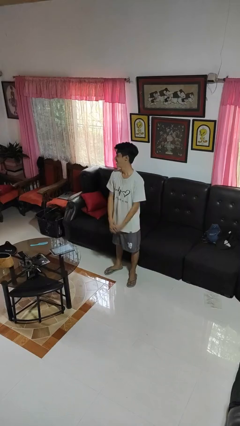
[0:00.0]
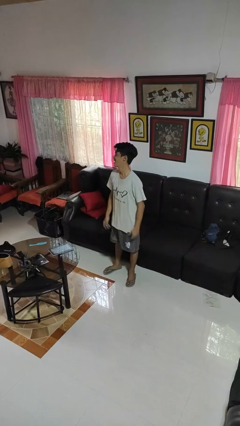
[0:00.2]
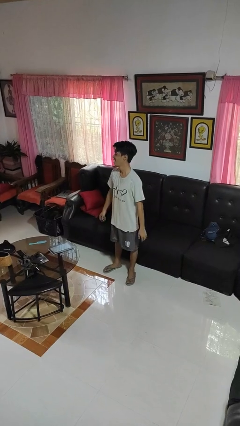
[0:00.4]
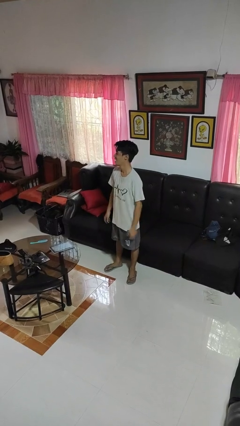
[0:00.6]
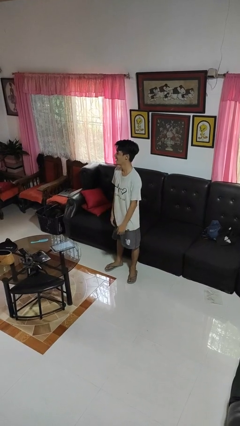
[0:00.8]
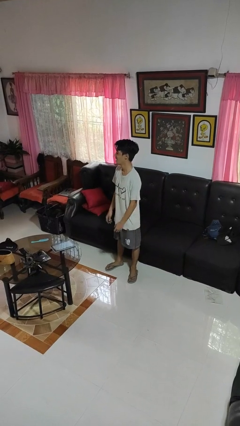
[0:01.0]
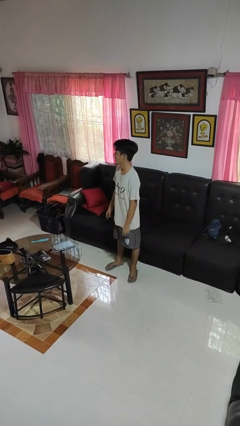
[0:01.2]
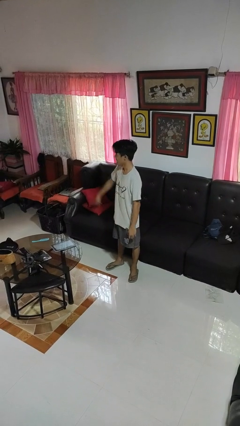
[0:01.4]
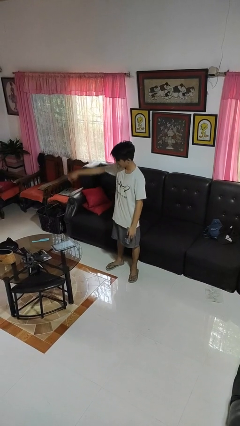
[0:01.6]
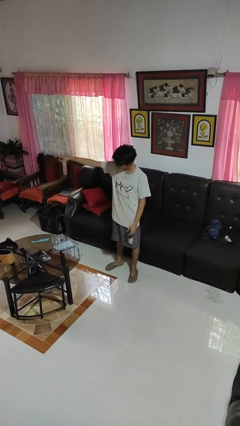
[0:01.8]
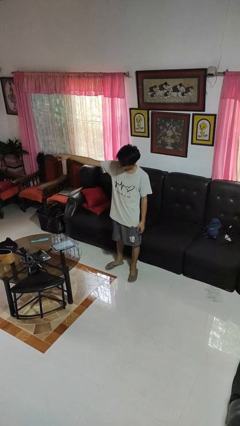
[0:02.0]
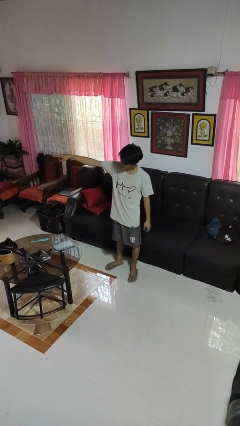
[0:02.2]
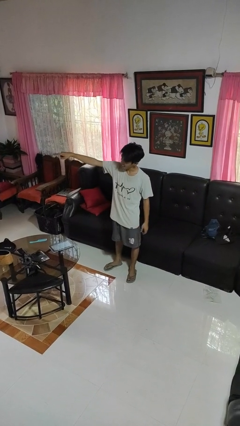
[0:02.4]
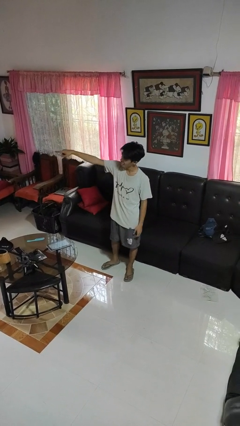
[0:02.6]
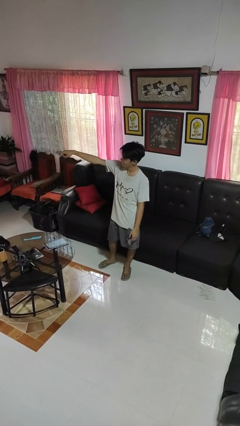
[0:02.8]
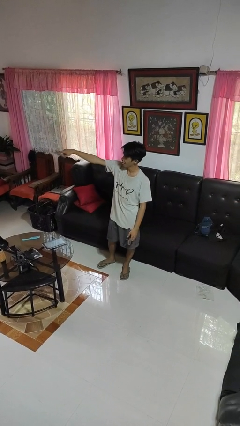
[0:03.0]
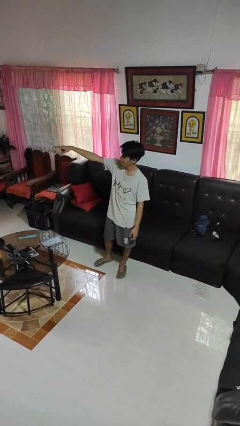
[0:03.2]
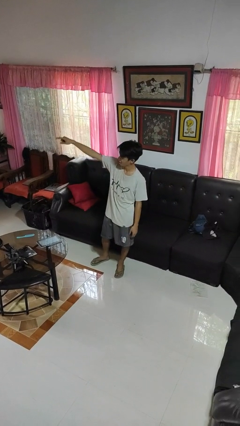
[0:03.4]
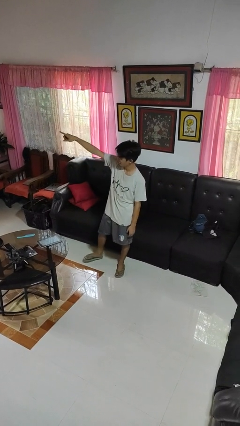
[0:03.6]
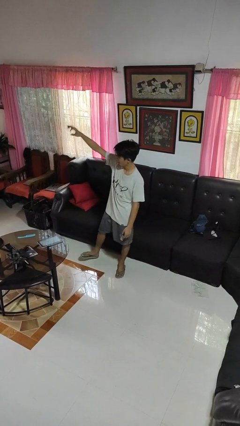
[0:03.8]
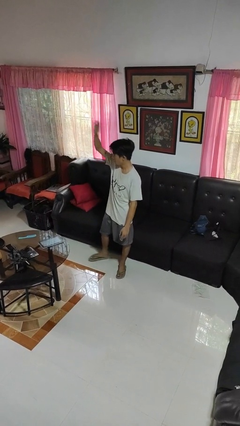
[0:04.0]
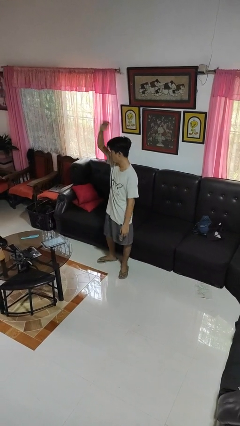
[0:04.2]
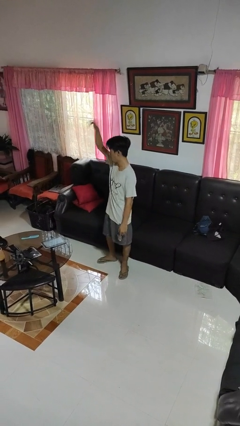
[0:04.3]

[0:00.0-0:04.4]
person points at person

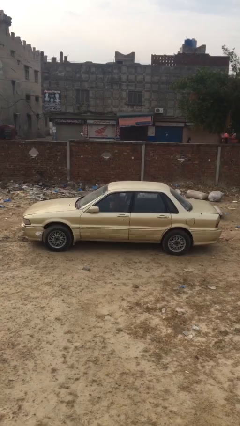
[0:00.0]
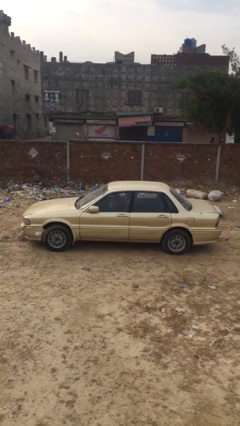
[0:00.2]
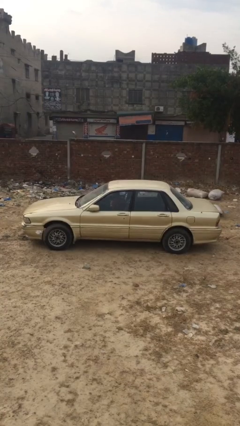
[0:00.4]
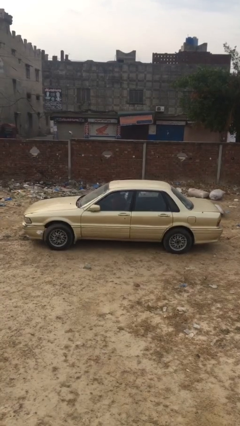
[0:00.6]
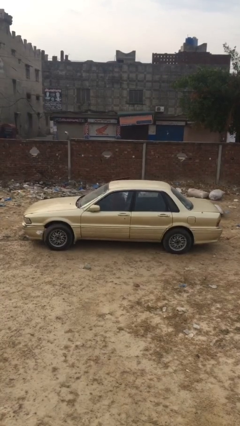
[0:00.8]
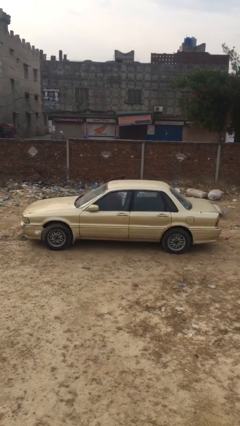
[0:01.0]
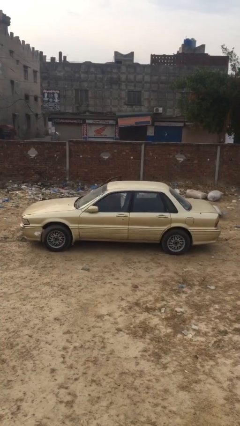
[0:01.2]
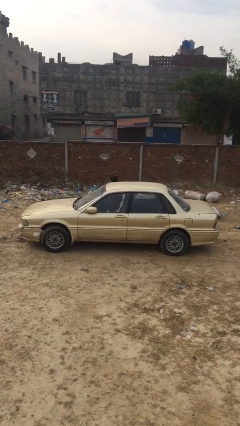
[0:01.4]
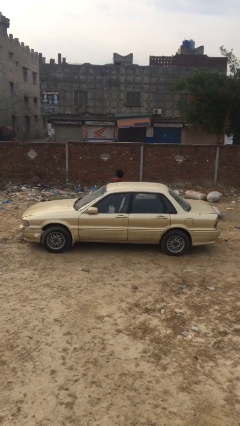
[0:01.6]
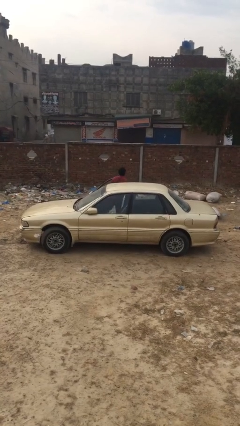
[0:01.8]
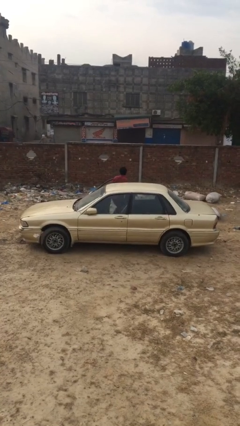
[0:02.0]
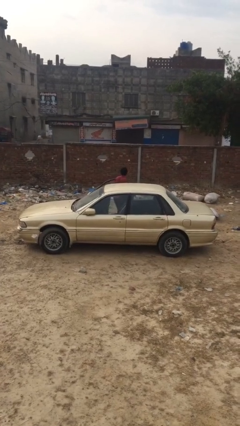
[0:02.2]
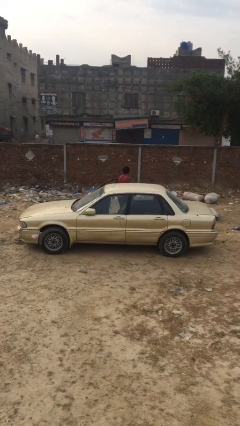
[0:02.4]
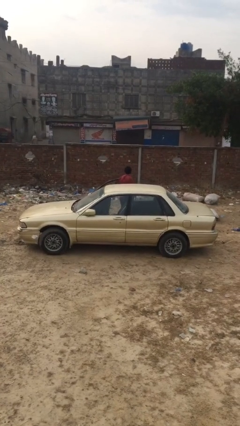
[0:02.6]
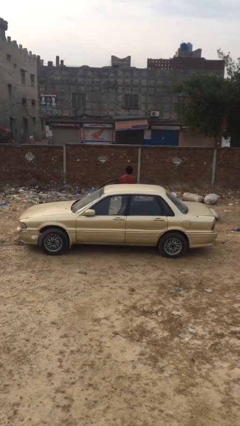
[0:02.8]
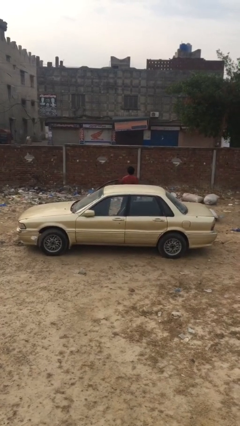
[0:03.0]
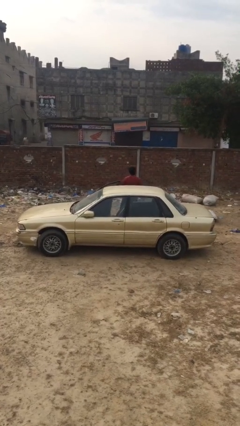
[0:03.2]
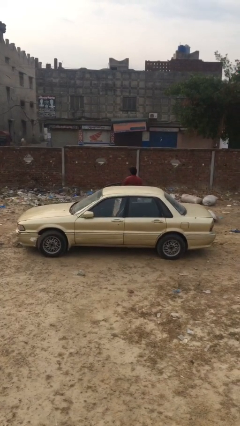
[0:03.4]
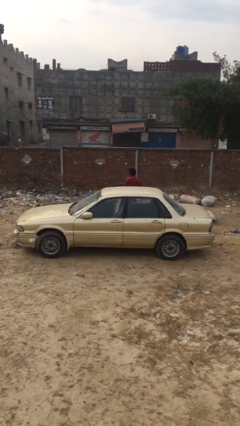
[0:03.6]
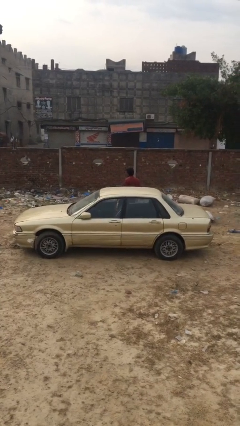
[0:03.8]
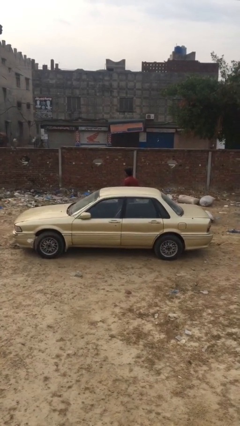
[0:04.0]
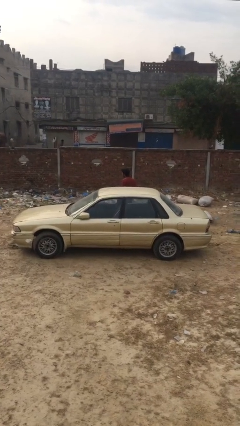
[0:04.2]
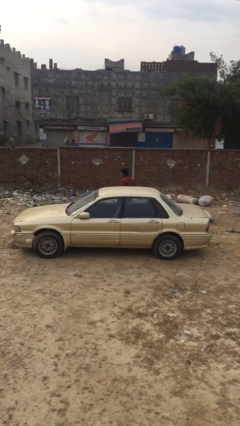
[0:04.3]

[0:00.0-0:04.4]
car drops off person

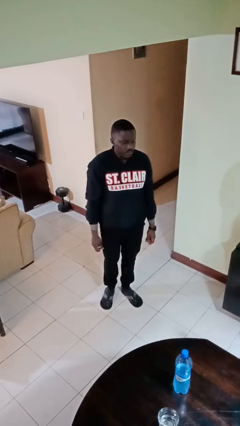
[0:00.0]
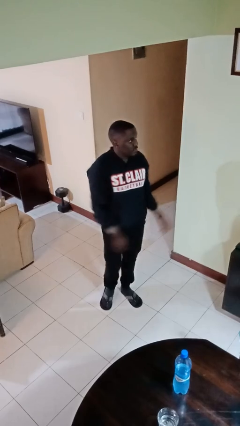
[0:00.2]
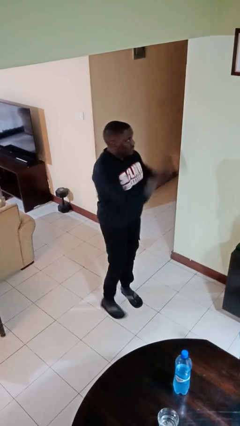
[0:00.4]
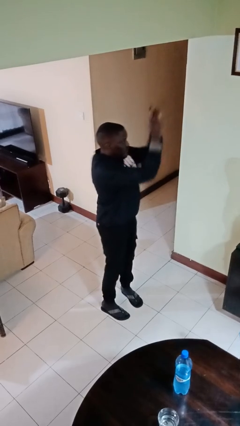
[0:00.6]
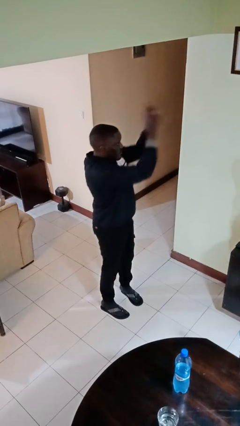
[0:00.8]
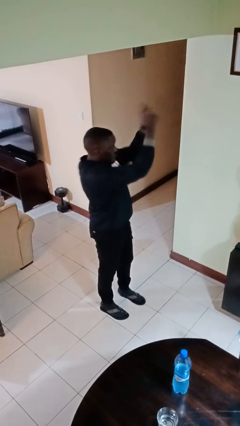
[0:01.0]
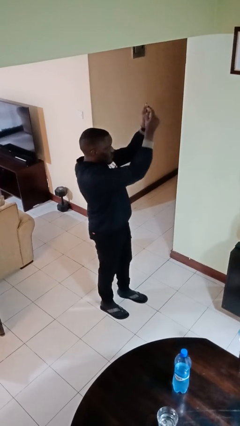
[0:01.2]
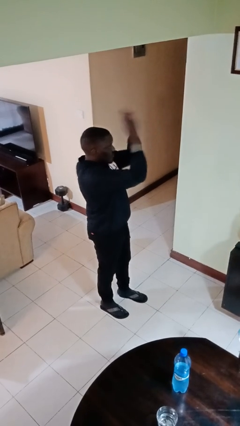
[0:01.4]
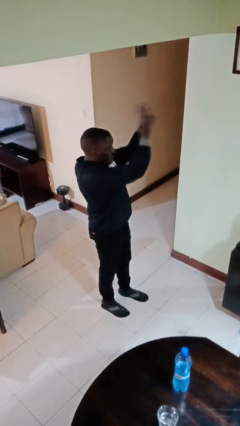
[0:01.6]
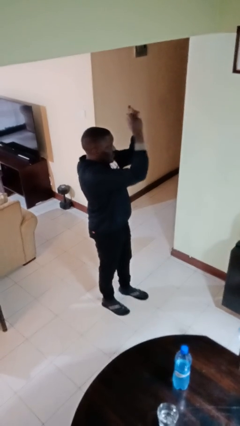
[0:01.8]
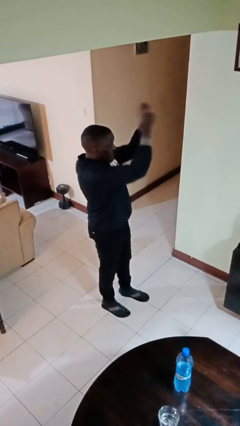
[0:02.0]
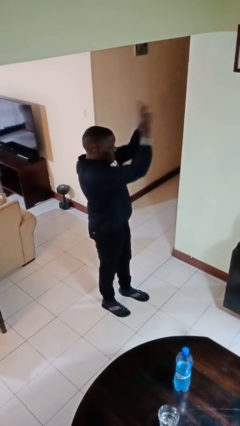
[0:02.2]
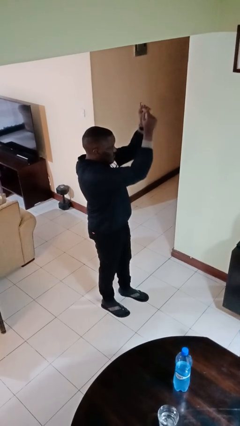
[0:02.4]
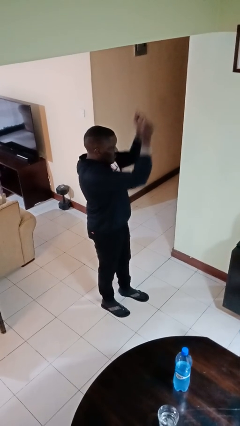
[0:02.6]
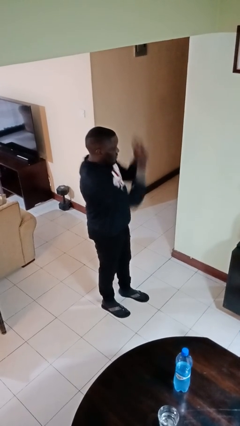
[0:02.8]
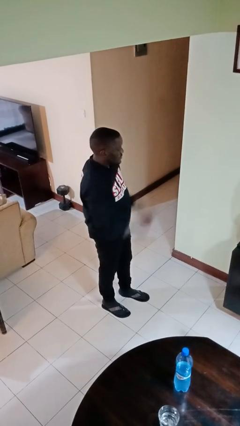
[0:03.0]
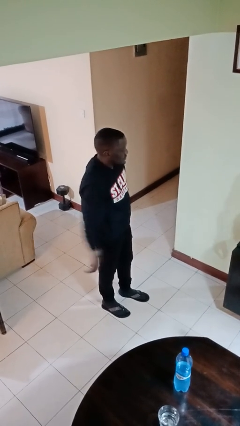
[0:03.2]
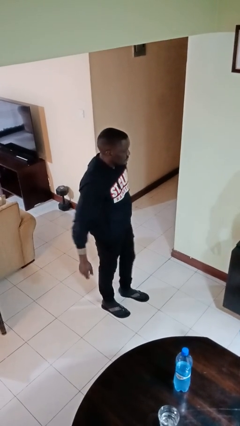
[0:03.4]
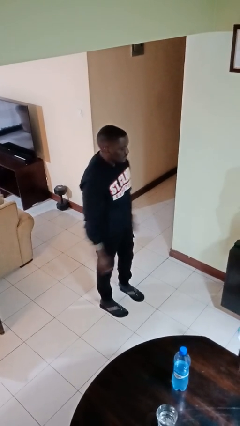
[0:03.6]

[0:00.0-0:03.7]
person snaps fingers

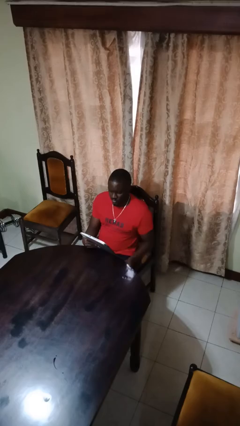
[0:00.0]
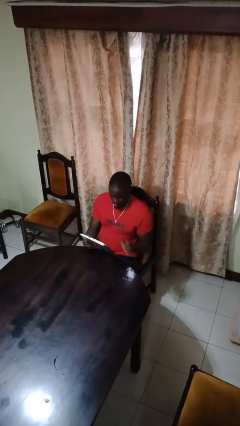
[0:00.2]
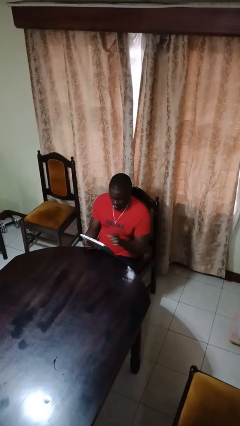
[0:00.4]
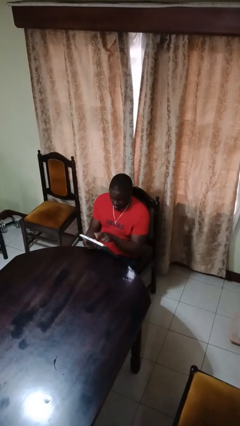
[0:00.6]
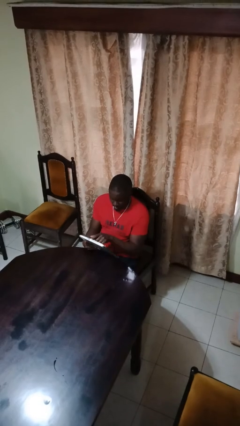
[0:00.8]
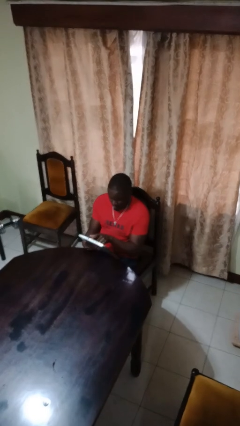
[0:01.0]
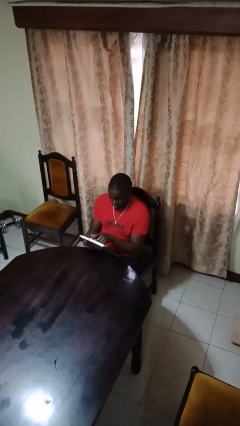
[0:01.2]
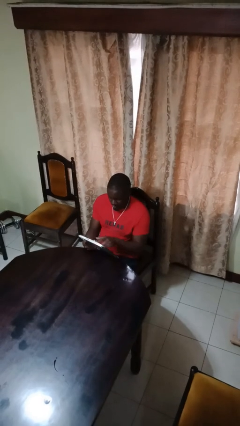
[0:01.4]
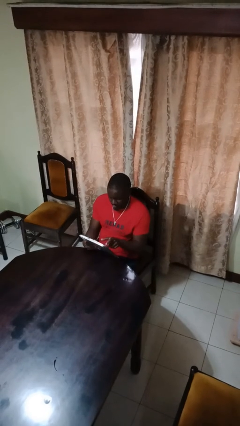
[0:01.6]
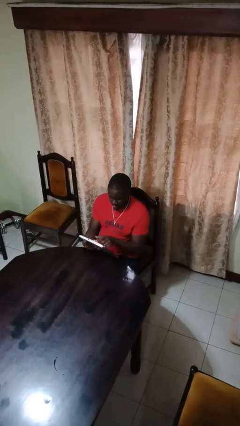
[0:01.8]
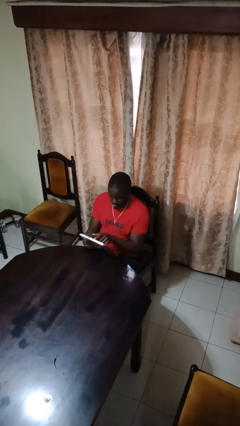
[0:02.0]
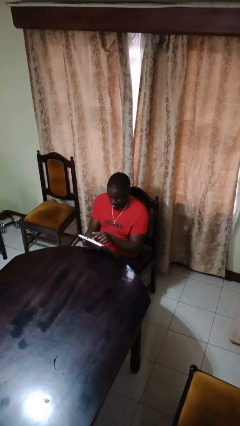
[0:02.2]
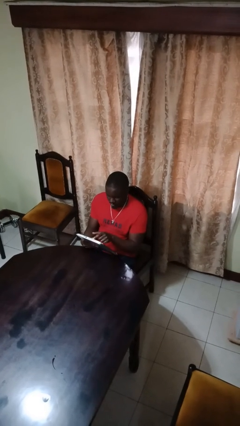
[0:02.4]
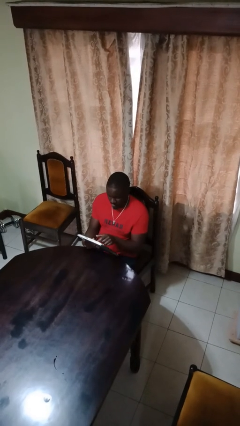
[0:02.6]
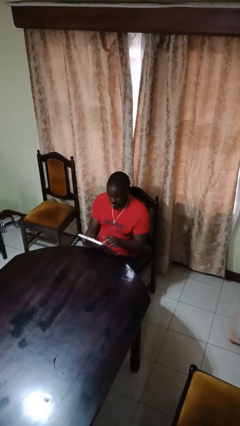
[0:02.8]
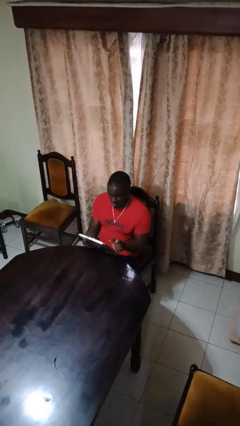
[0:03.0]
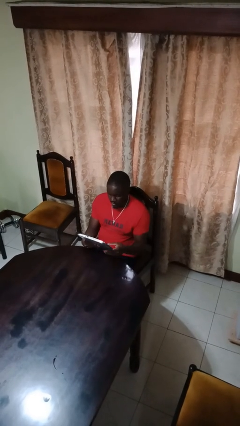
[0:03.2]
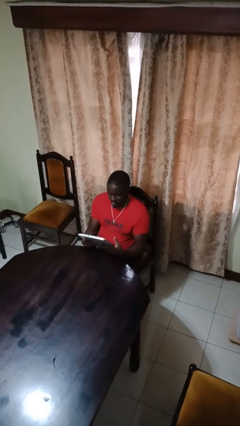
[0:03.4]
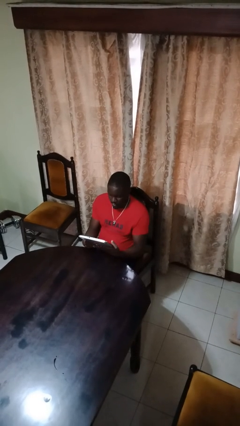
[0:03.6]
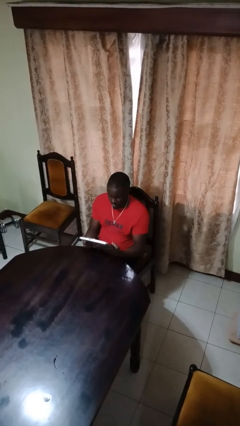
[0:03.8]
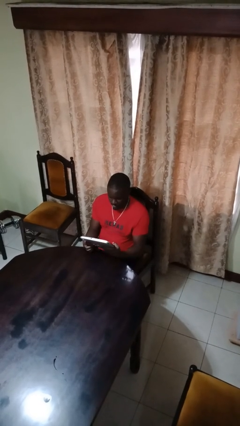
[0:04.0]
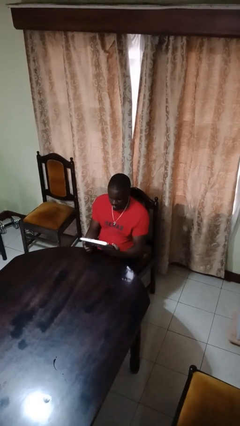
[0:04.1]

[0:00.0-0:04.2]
person interacts with tablet

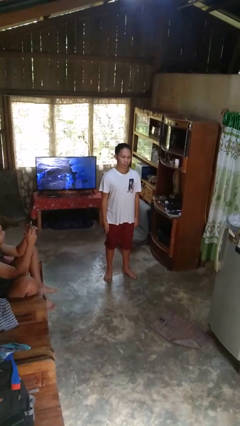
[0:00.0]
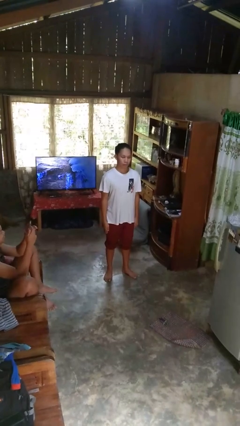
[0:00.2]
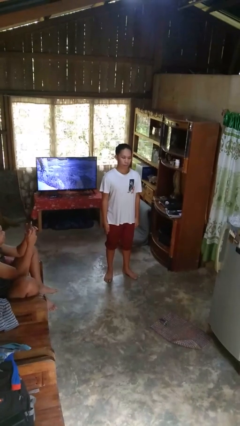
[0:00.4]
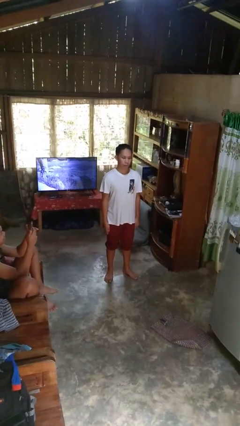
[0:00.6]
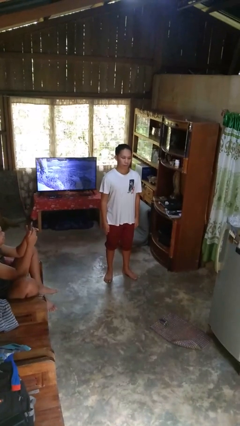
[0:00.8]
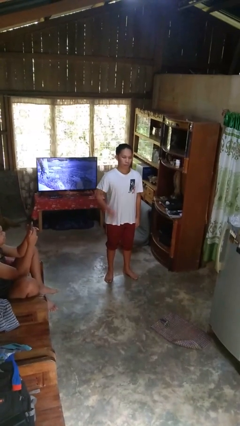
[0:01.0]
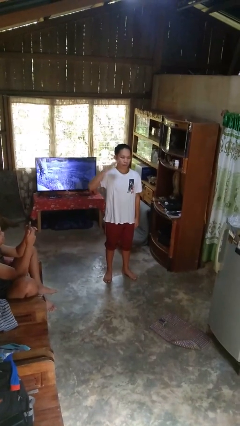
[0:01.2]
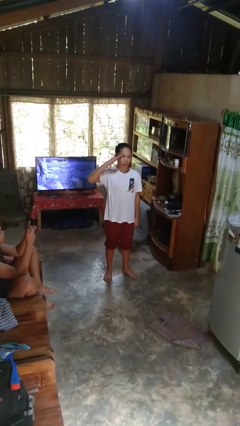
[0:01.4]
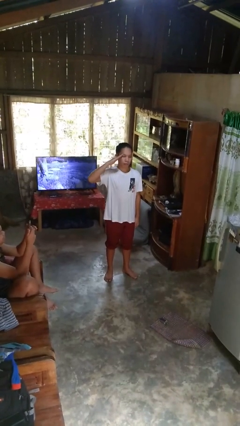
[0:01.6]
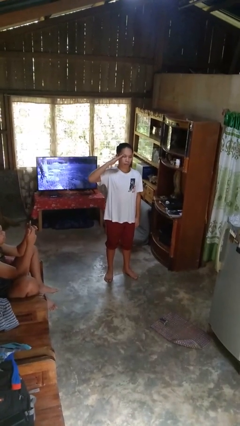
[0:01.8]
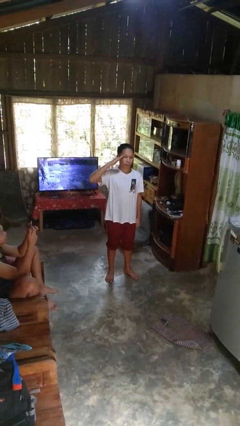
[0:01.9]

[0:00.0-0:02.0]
person salutes
